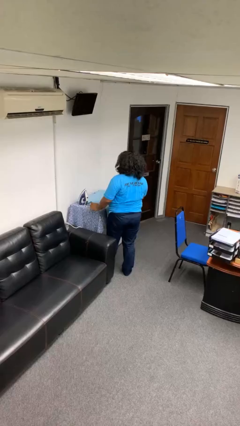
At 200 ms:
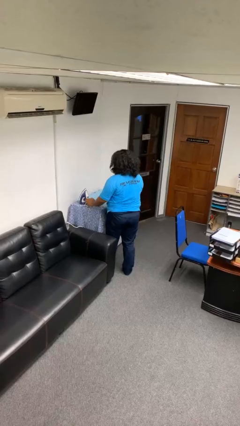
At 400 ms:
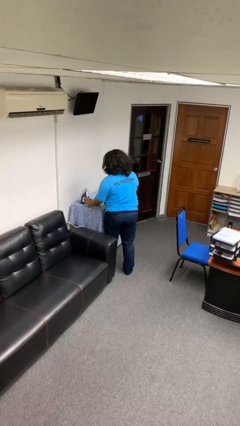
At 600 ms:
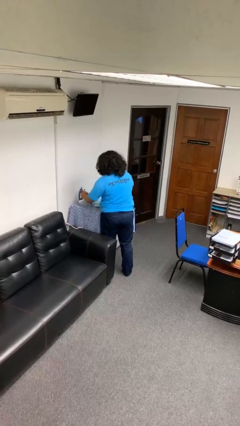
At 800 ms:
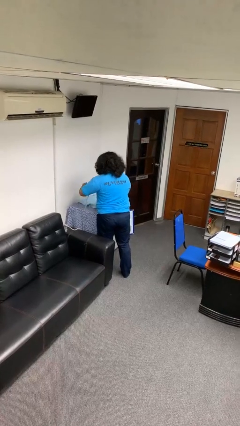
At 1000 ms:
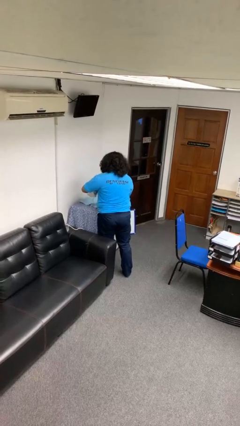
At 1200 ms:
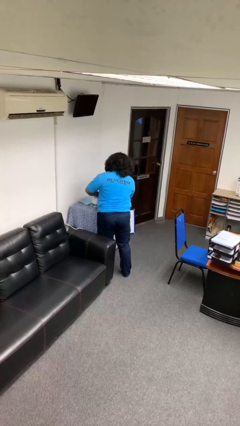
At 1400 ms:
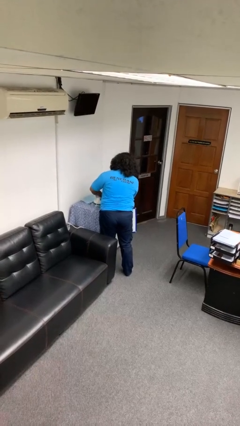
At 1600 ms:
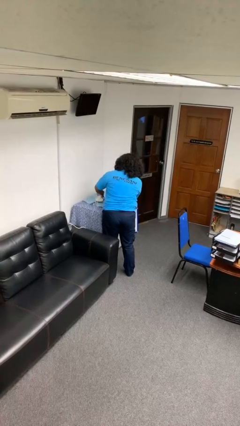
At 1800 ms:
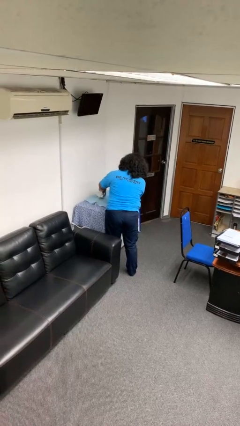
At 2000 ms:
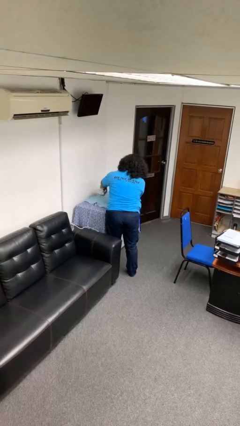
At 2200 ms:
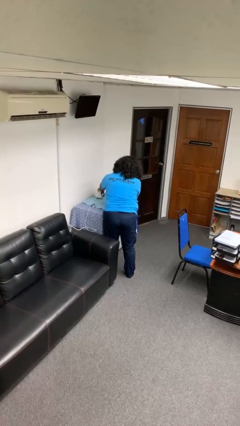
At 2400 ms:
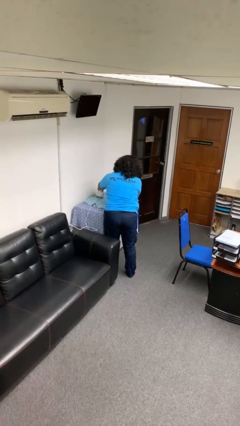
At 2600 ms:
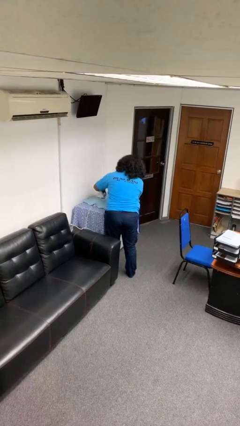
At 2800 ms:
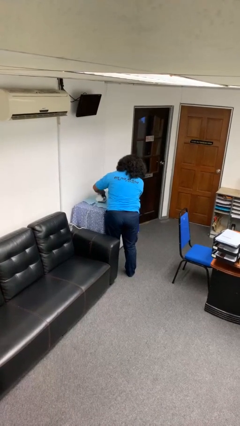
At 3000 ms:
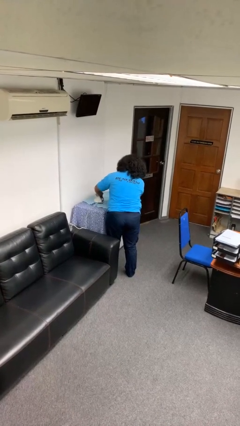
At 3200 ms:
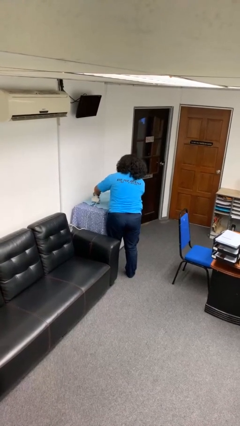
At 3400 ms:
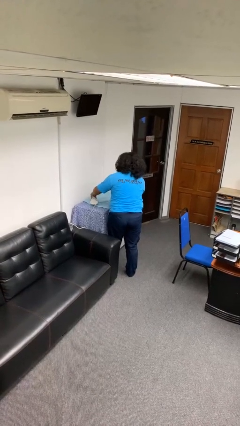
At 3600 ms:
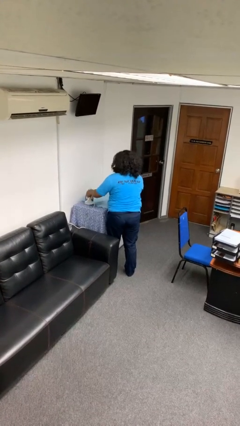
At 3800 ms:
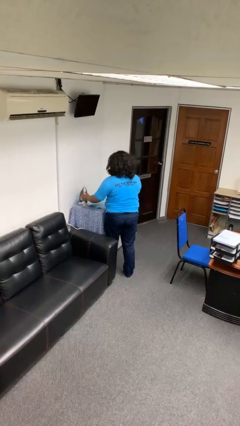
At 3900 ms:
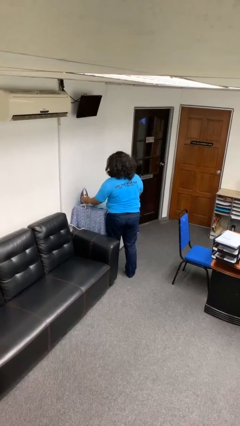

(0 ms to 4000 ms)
person irons clothes

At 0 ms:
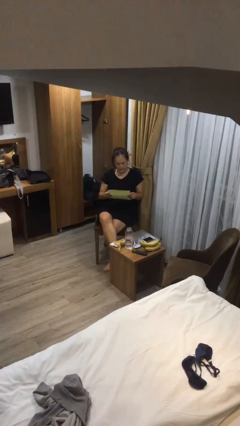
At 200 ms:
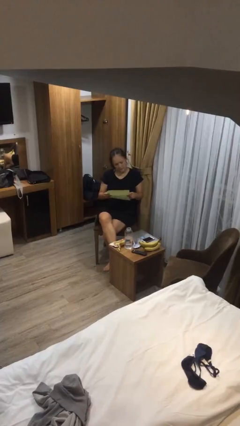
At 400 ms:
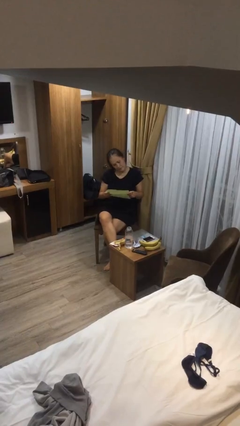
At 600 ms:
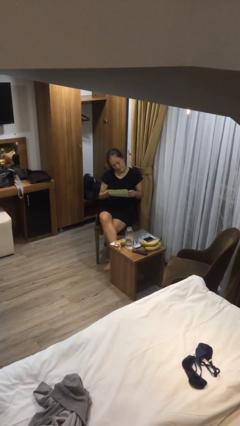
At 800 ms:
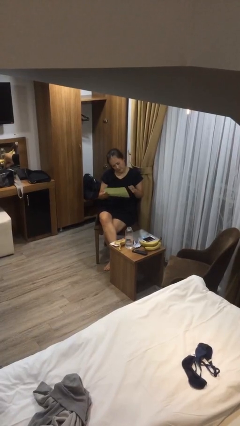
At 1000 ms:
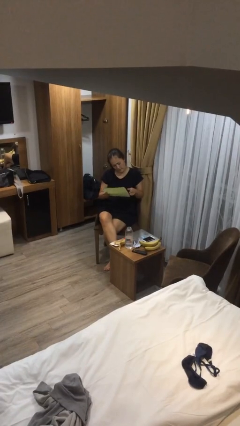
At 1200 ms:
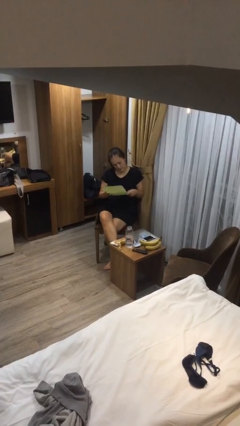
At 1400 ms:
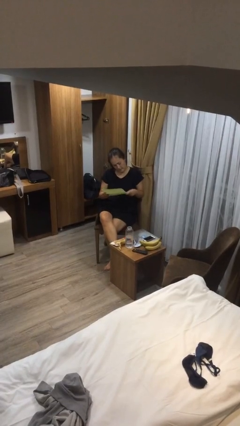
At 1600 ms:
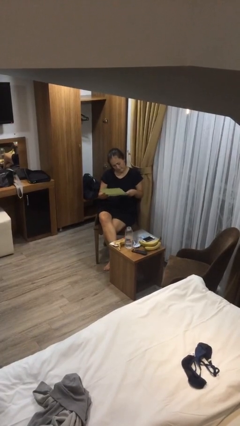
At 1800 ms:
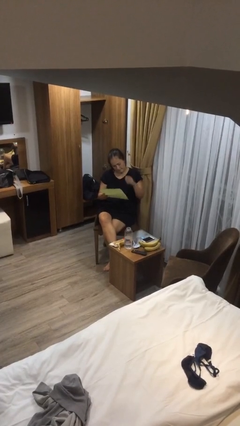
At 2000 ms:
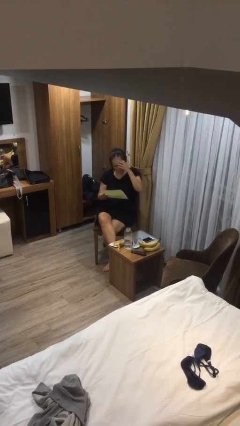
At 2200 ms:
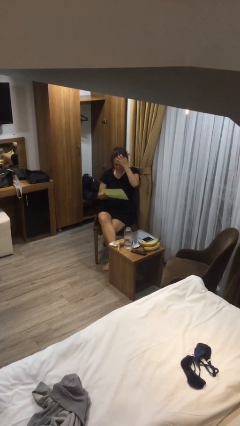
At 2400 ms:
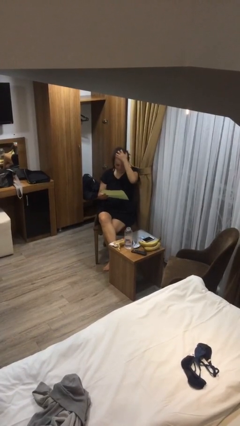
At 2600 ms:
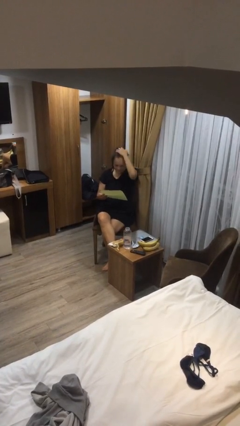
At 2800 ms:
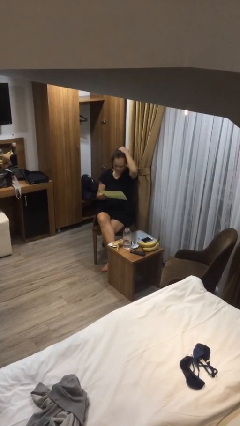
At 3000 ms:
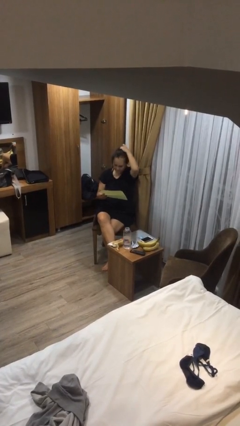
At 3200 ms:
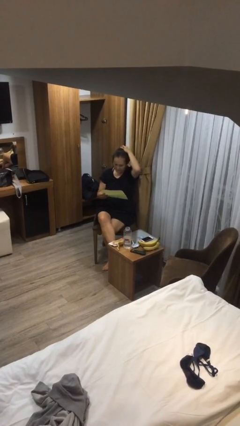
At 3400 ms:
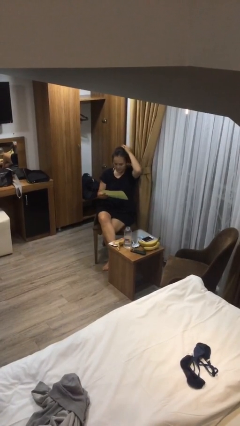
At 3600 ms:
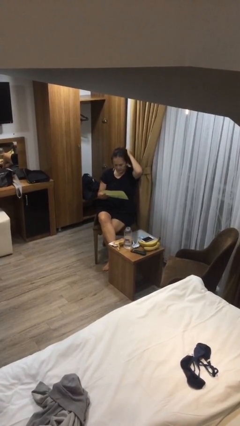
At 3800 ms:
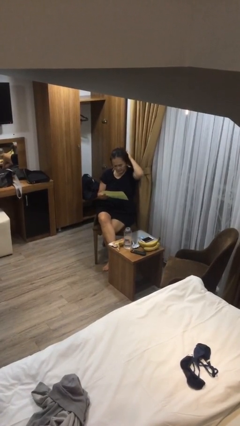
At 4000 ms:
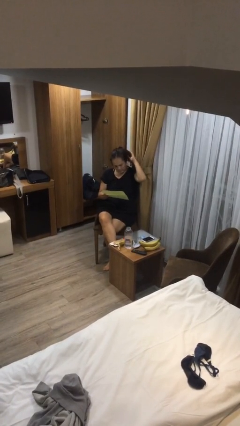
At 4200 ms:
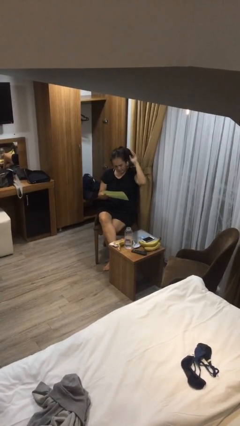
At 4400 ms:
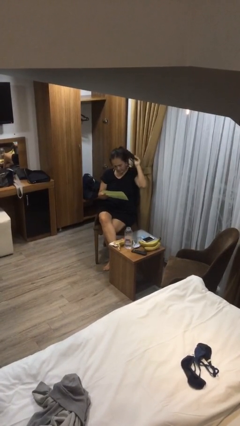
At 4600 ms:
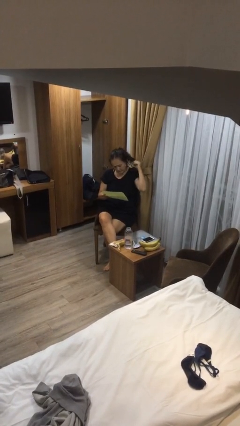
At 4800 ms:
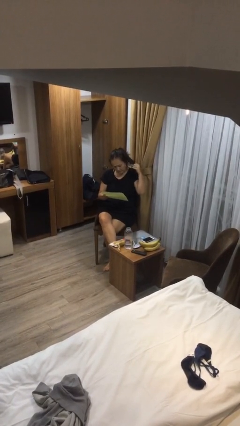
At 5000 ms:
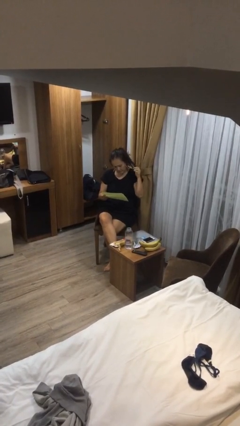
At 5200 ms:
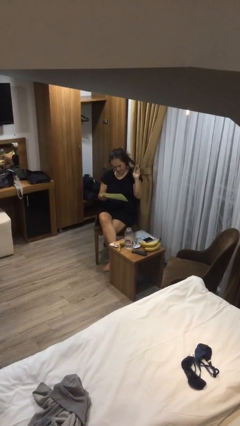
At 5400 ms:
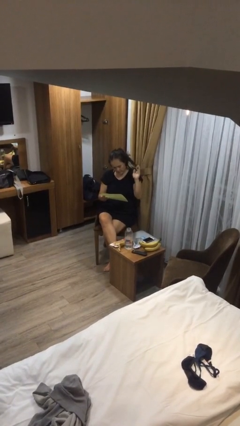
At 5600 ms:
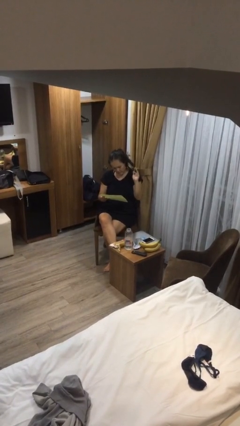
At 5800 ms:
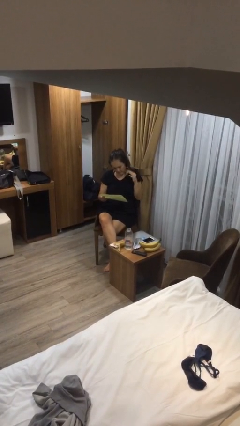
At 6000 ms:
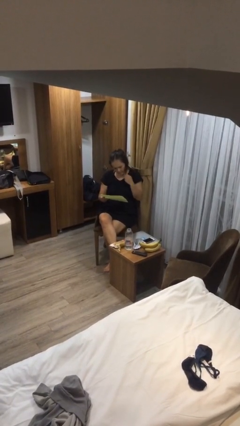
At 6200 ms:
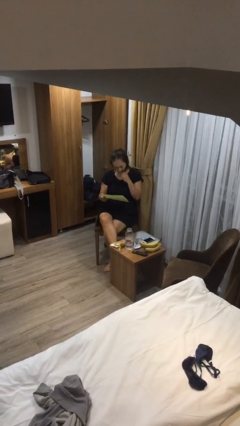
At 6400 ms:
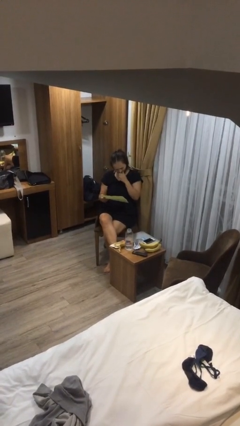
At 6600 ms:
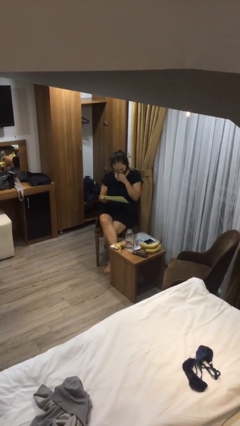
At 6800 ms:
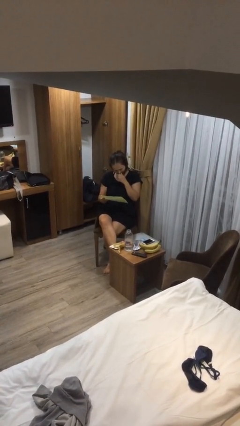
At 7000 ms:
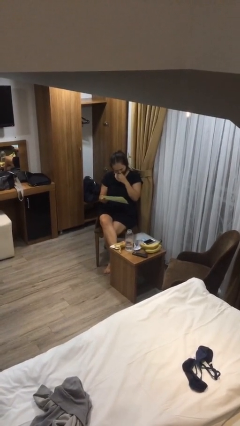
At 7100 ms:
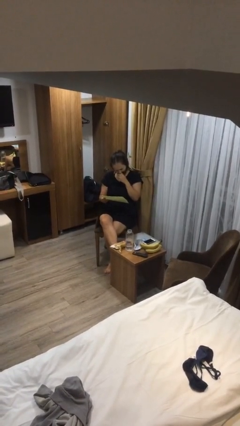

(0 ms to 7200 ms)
person reads document

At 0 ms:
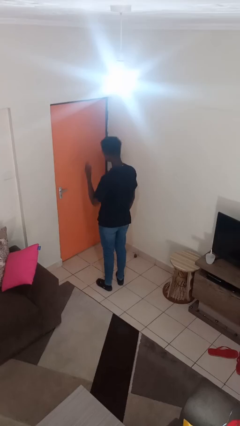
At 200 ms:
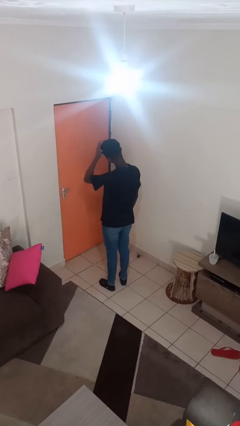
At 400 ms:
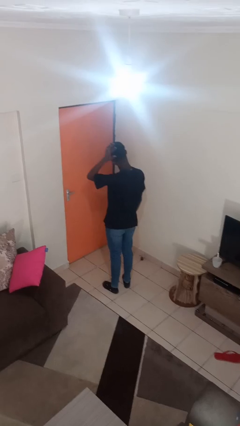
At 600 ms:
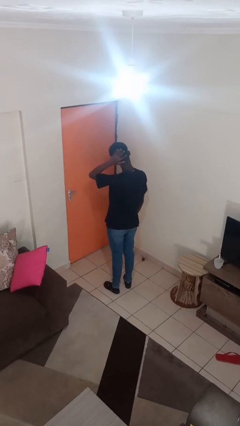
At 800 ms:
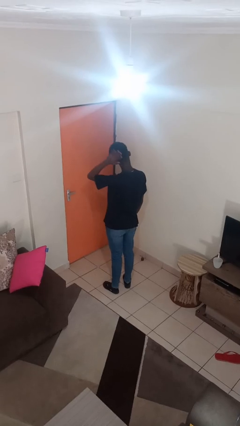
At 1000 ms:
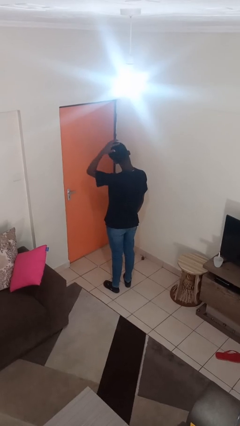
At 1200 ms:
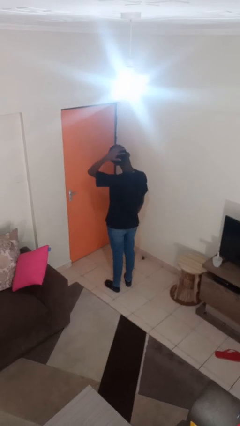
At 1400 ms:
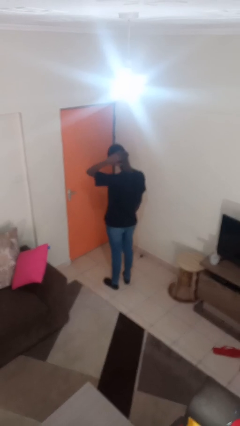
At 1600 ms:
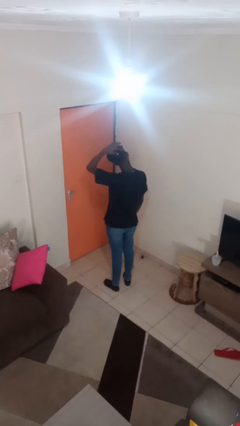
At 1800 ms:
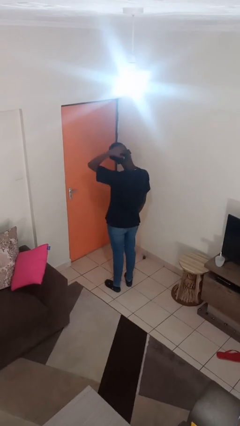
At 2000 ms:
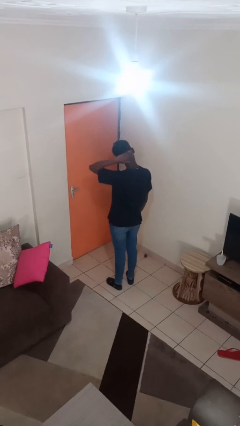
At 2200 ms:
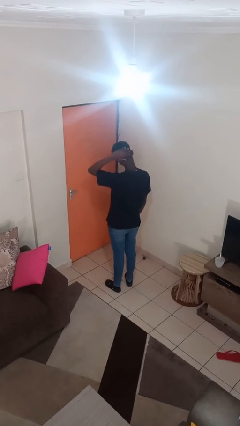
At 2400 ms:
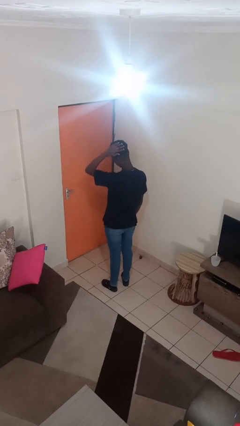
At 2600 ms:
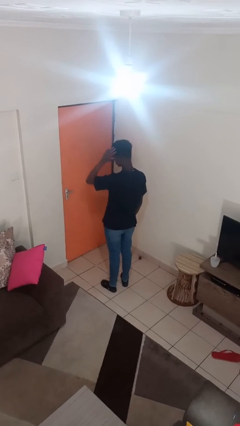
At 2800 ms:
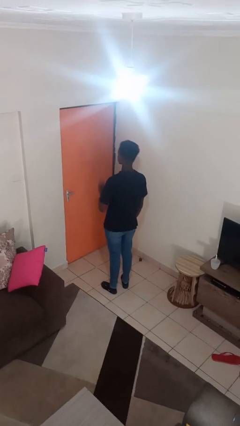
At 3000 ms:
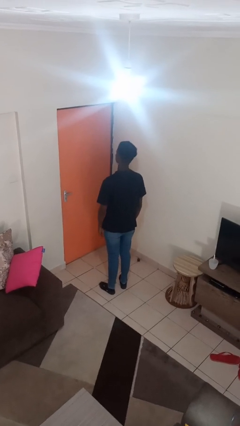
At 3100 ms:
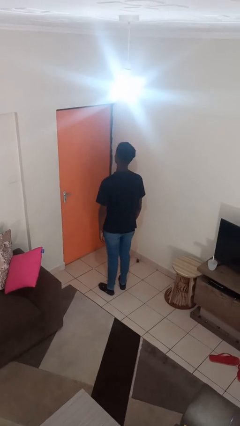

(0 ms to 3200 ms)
person strokes hair

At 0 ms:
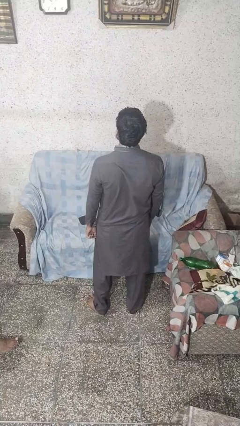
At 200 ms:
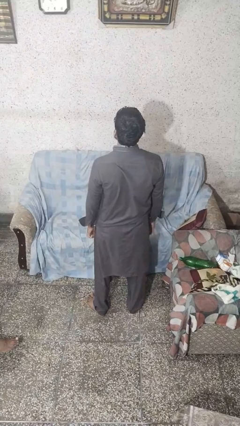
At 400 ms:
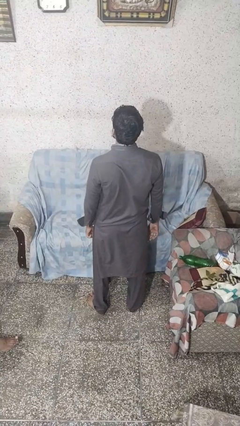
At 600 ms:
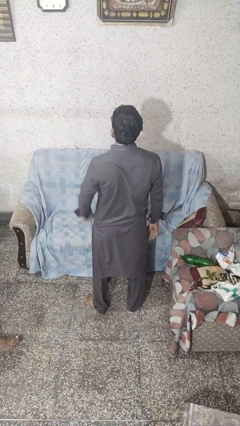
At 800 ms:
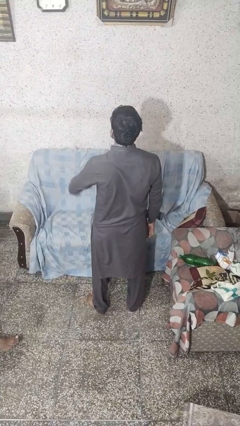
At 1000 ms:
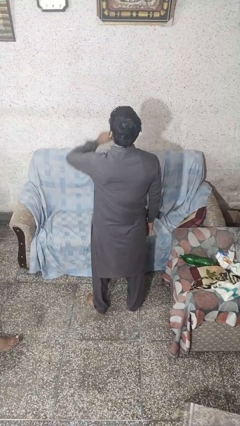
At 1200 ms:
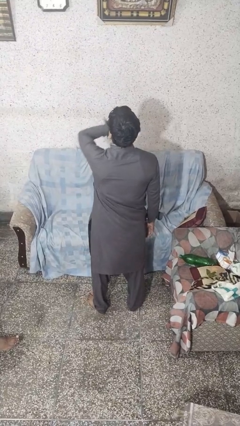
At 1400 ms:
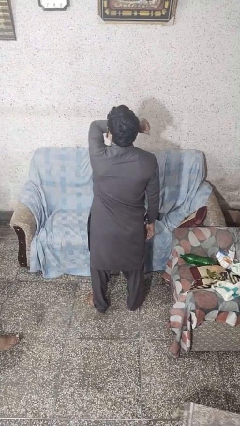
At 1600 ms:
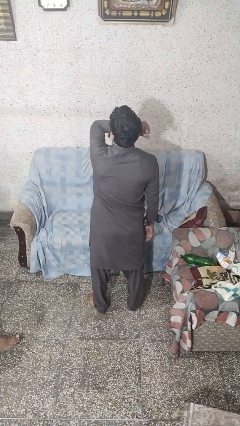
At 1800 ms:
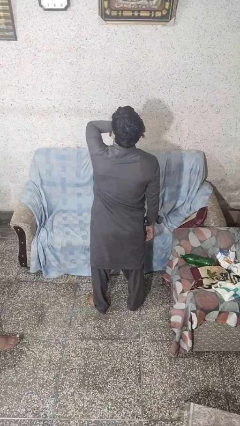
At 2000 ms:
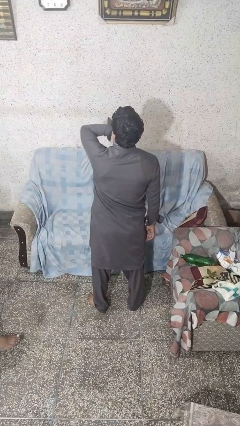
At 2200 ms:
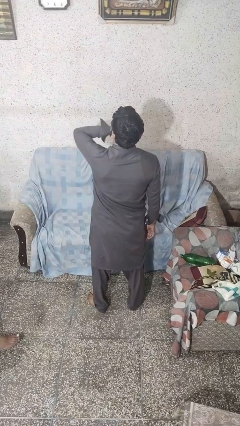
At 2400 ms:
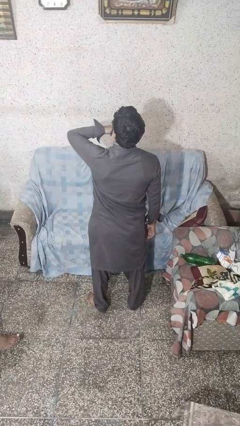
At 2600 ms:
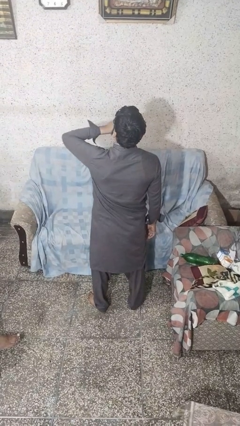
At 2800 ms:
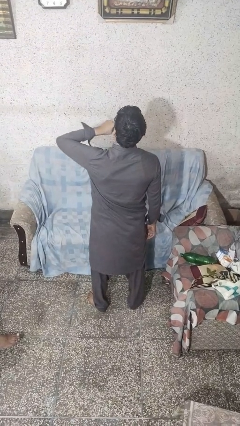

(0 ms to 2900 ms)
person gestures cut

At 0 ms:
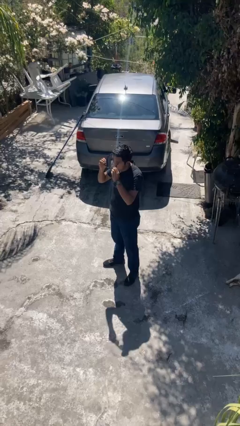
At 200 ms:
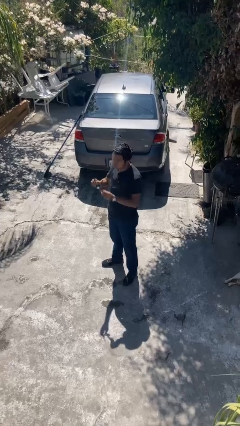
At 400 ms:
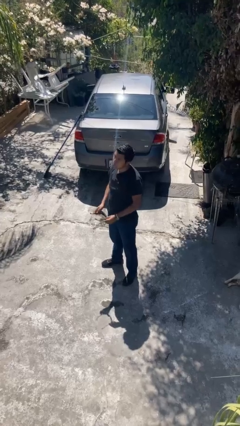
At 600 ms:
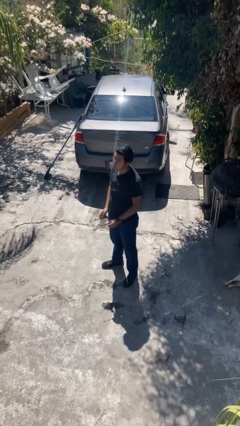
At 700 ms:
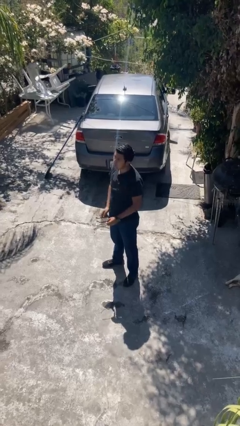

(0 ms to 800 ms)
person takes off sunglasses
